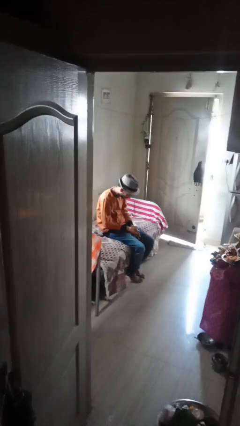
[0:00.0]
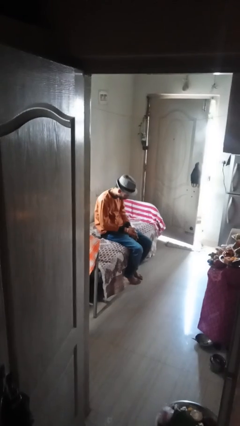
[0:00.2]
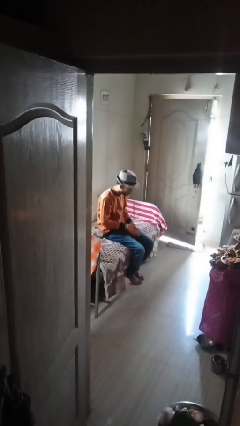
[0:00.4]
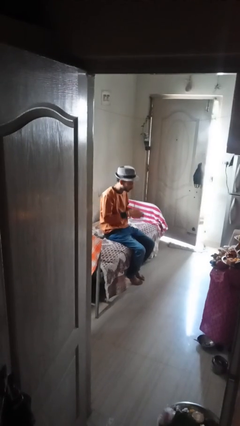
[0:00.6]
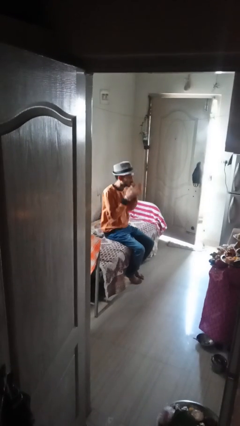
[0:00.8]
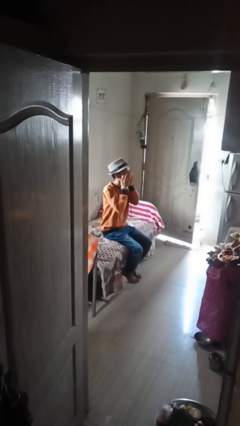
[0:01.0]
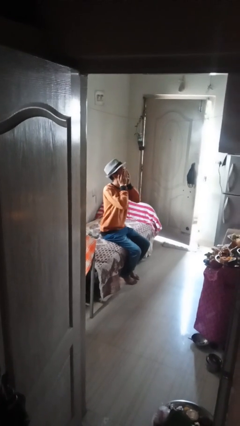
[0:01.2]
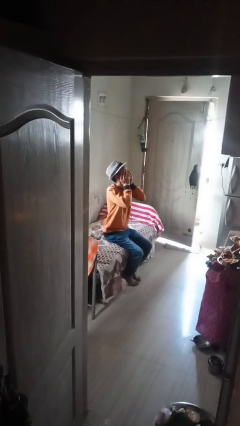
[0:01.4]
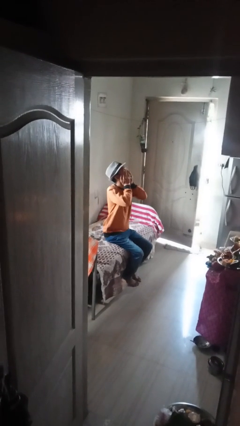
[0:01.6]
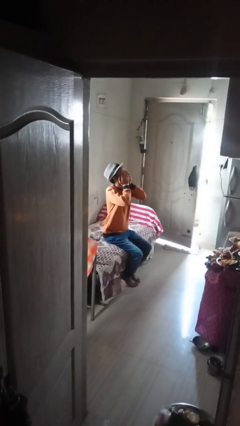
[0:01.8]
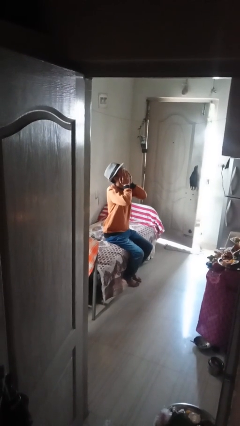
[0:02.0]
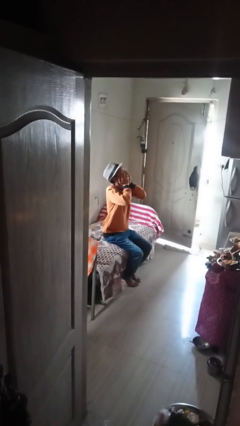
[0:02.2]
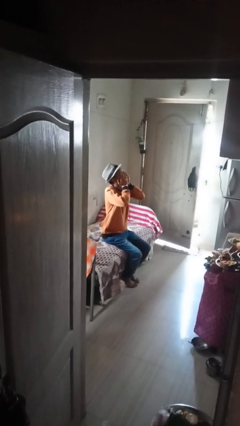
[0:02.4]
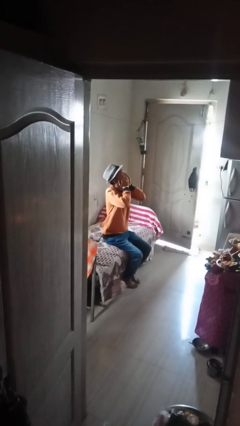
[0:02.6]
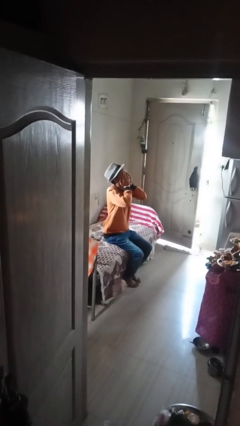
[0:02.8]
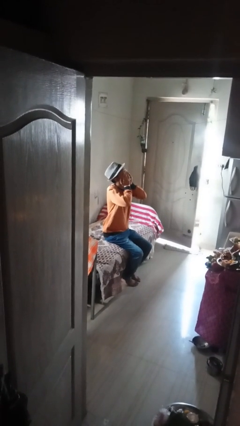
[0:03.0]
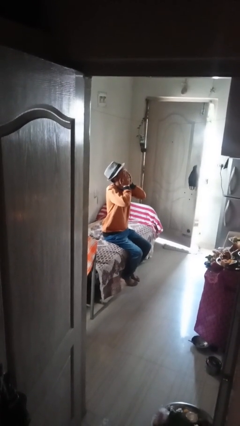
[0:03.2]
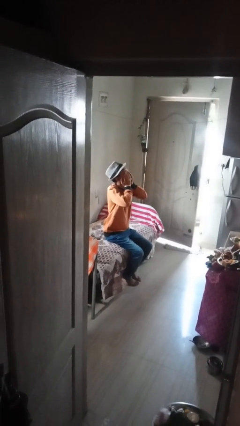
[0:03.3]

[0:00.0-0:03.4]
person covers face with hands

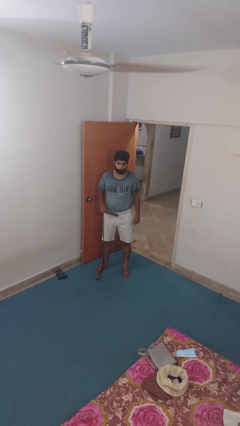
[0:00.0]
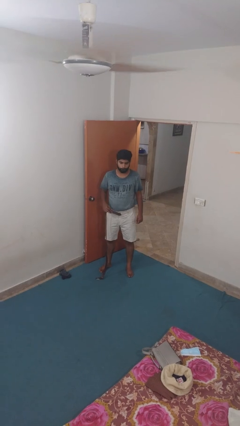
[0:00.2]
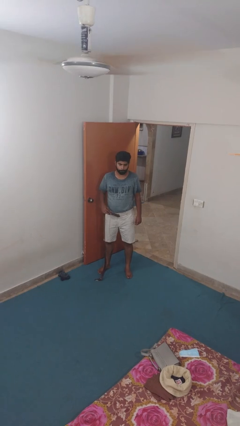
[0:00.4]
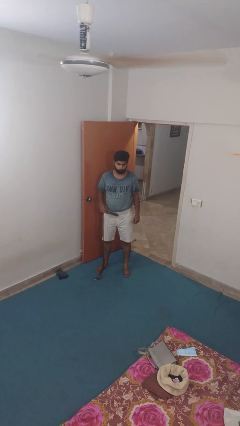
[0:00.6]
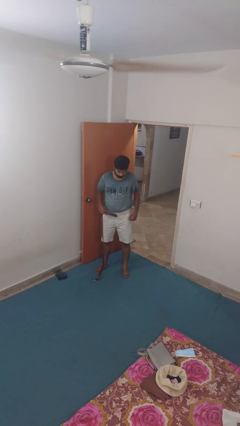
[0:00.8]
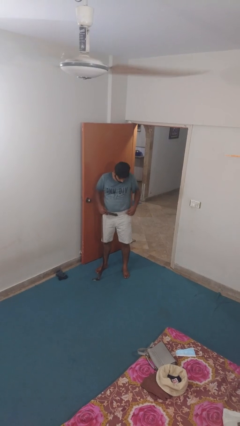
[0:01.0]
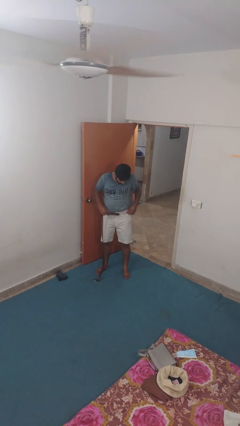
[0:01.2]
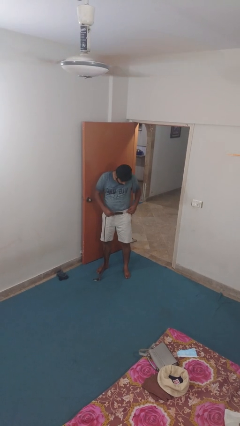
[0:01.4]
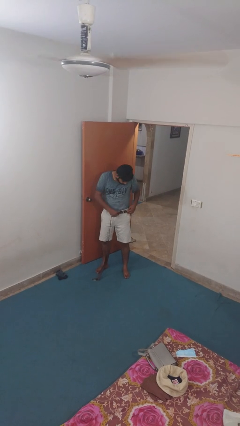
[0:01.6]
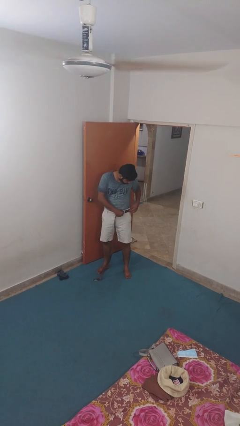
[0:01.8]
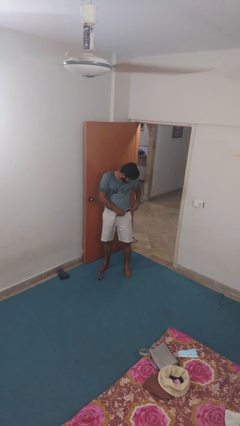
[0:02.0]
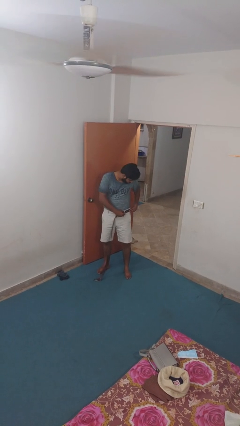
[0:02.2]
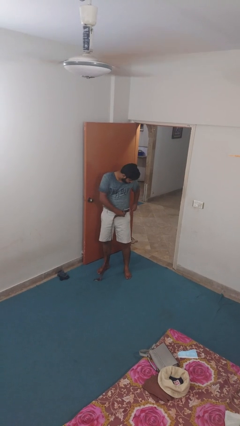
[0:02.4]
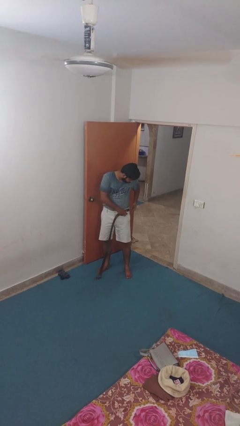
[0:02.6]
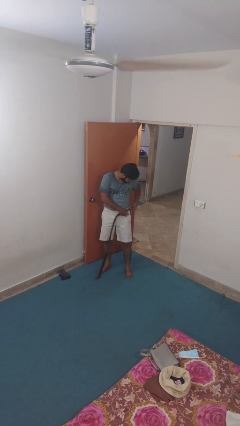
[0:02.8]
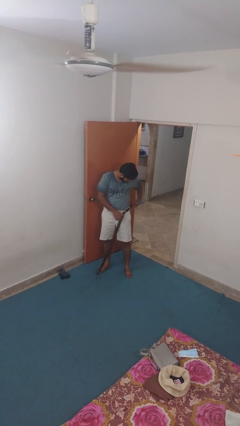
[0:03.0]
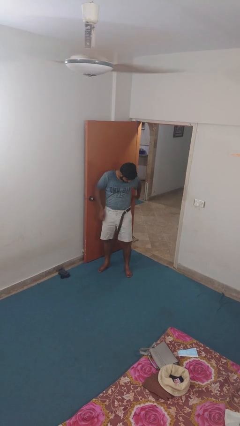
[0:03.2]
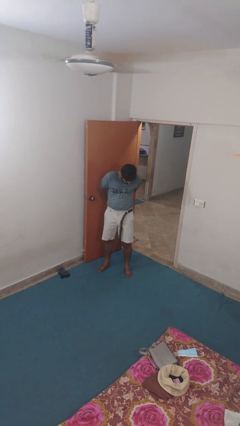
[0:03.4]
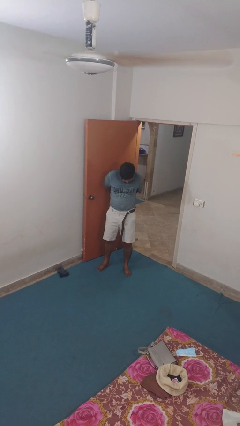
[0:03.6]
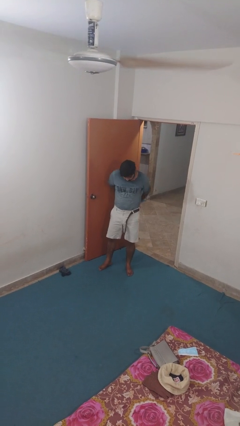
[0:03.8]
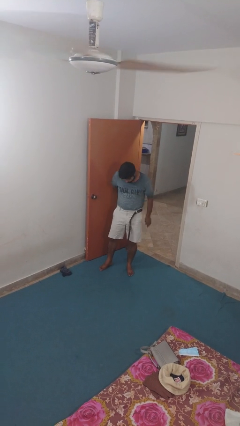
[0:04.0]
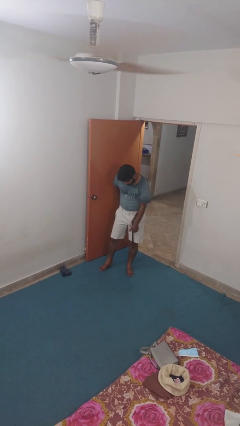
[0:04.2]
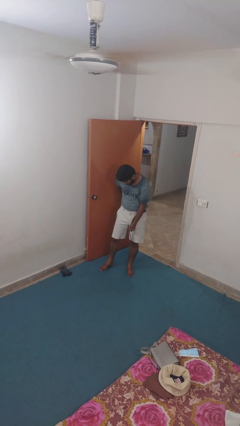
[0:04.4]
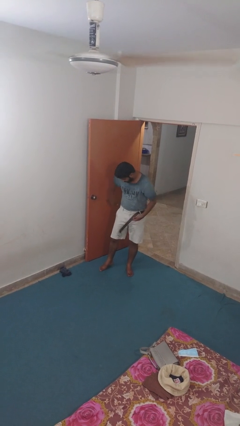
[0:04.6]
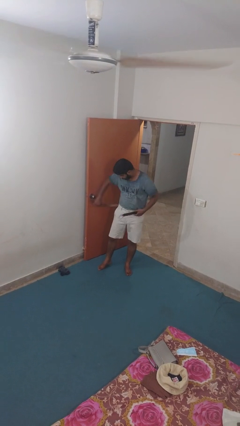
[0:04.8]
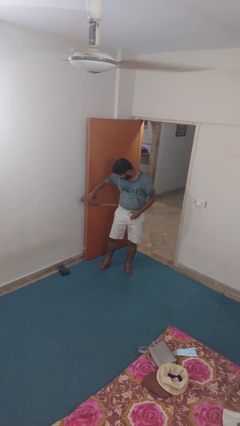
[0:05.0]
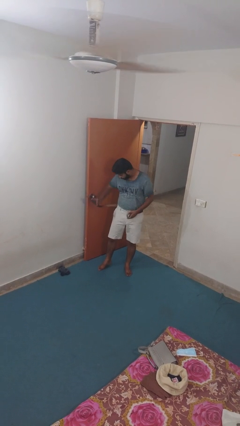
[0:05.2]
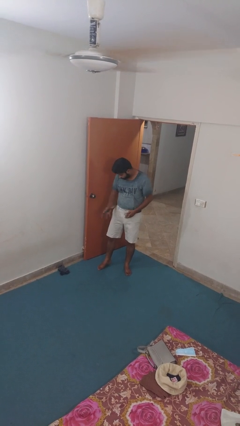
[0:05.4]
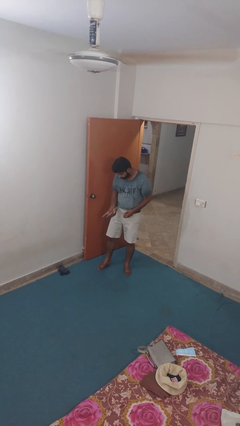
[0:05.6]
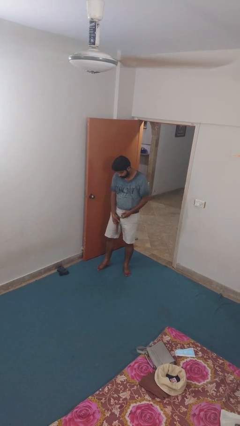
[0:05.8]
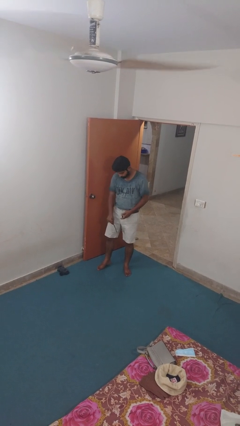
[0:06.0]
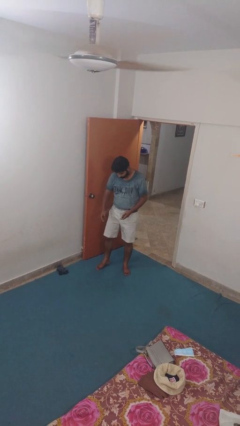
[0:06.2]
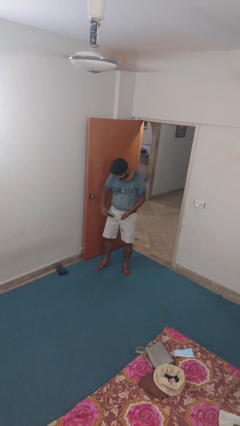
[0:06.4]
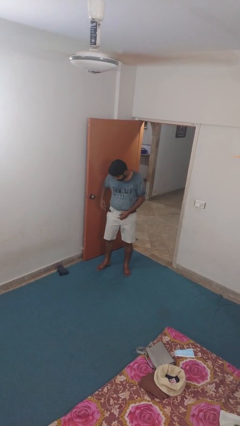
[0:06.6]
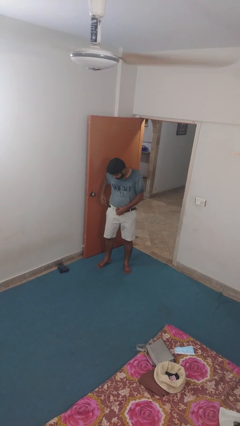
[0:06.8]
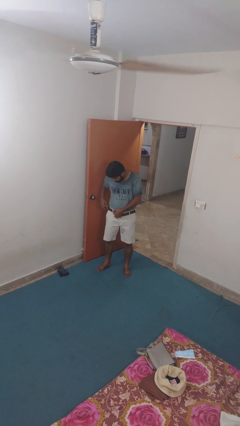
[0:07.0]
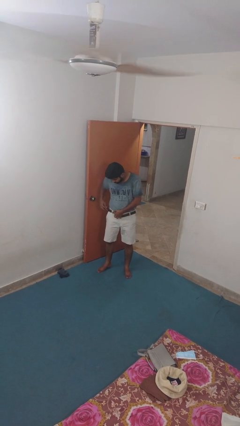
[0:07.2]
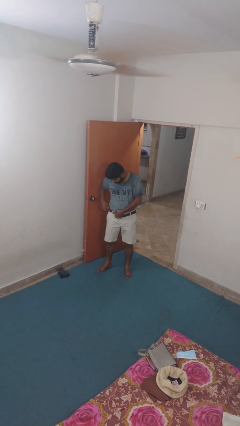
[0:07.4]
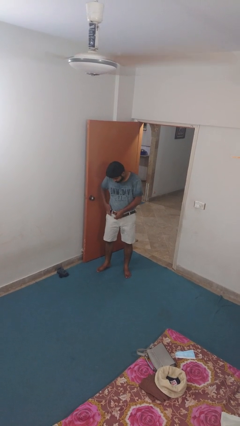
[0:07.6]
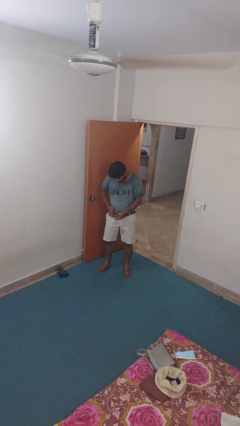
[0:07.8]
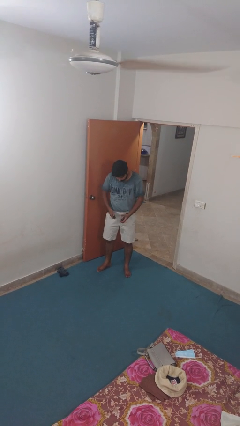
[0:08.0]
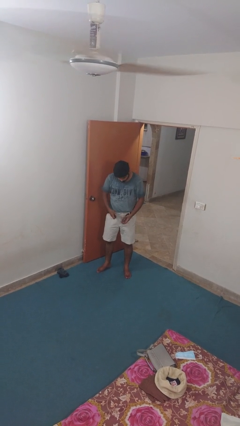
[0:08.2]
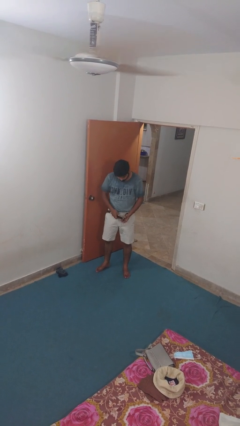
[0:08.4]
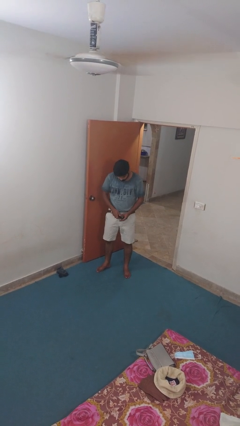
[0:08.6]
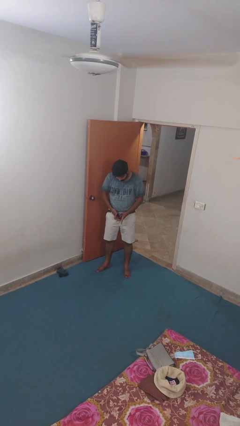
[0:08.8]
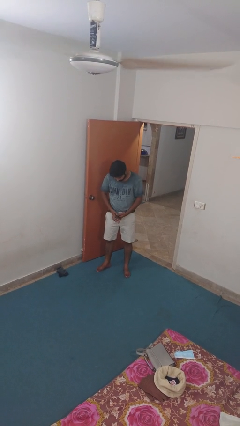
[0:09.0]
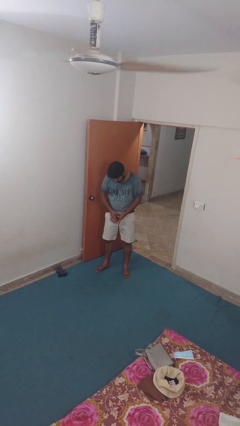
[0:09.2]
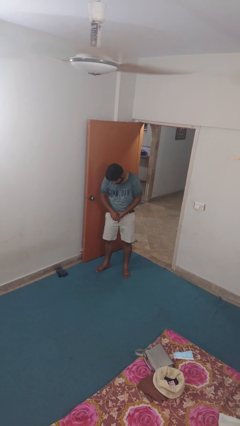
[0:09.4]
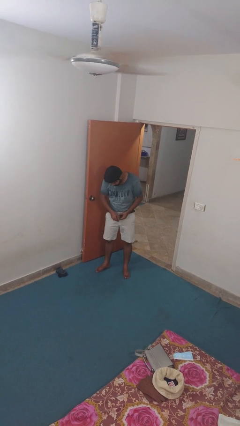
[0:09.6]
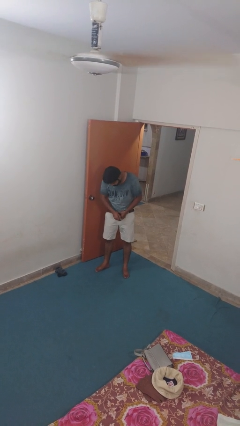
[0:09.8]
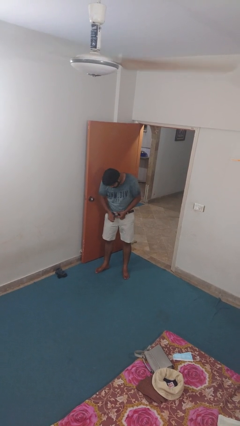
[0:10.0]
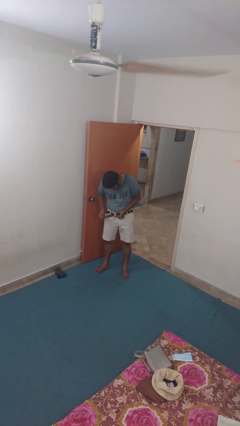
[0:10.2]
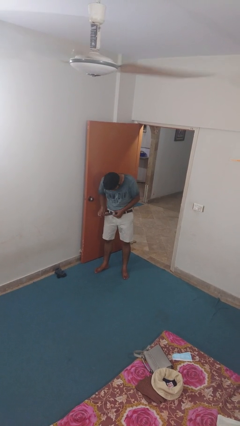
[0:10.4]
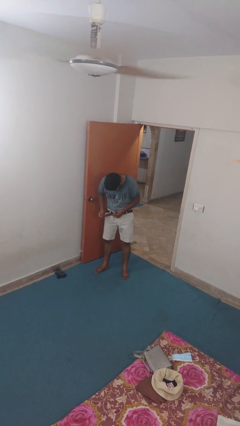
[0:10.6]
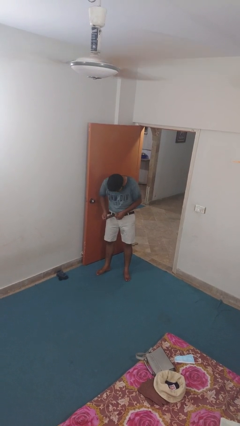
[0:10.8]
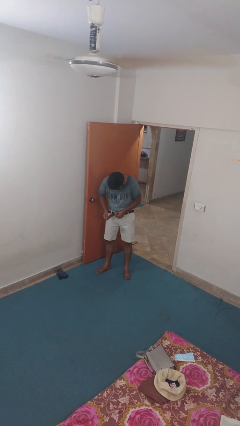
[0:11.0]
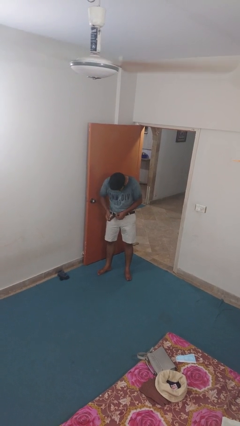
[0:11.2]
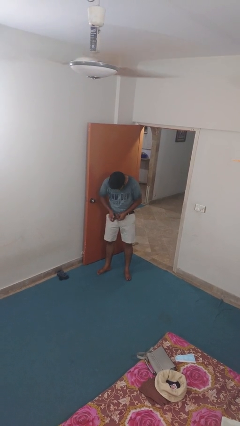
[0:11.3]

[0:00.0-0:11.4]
person puts on belt

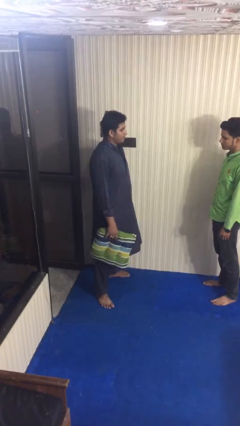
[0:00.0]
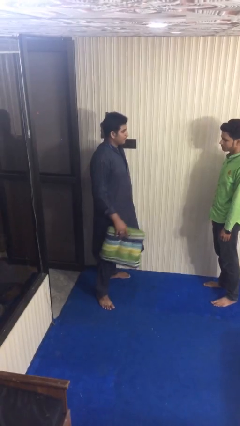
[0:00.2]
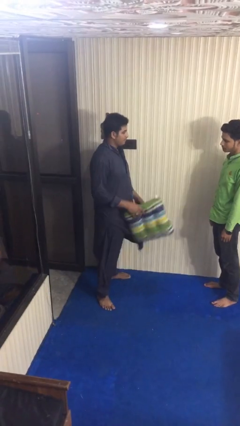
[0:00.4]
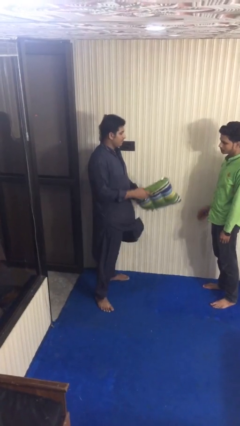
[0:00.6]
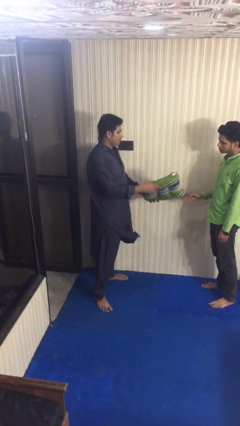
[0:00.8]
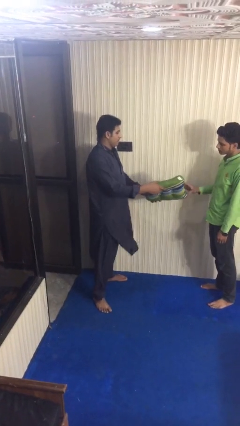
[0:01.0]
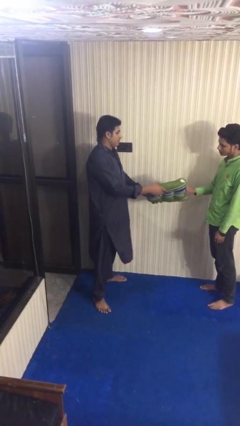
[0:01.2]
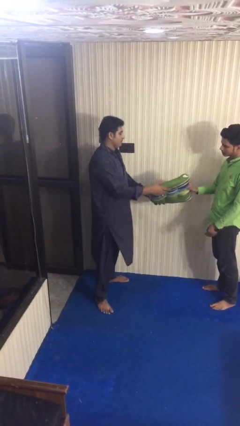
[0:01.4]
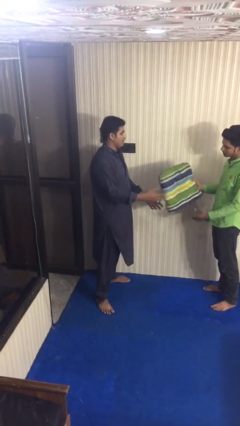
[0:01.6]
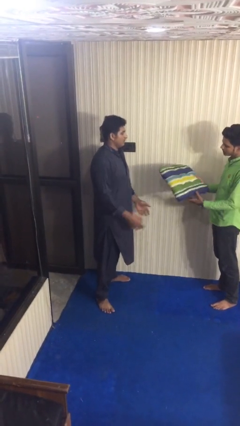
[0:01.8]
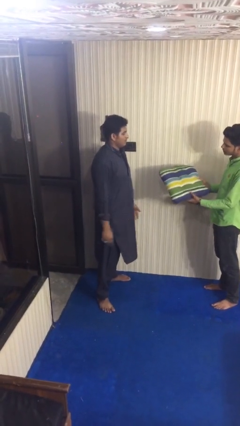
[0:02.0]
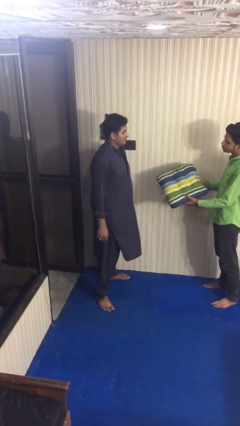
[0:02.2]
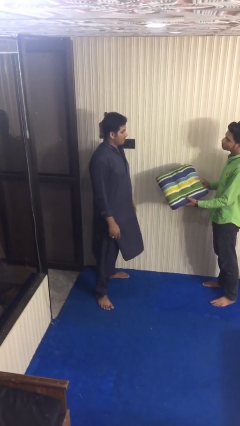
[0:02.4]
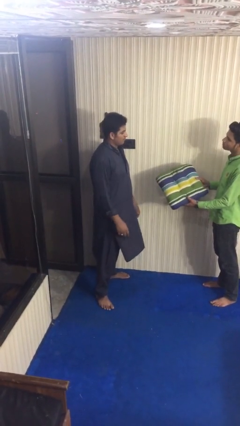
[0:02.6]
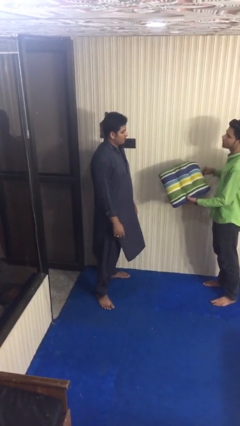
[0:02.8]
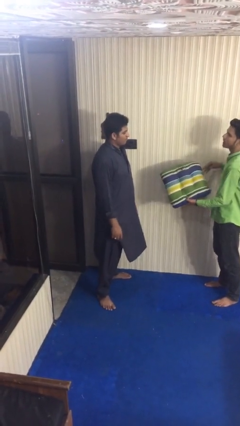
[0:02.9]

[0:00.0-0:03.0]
person transfers object to person

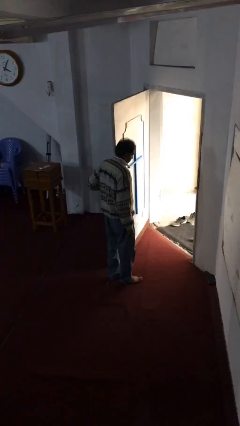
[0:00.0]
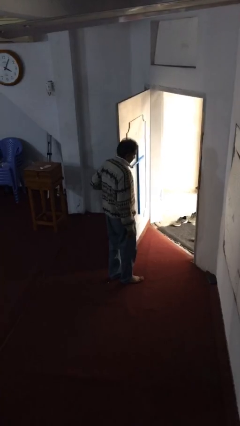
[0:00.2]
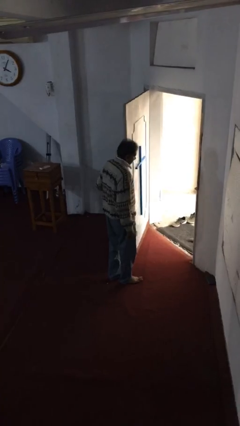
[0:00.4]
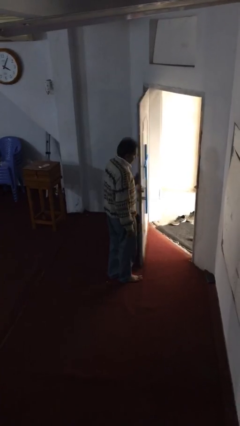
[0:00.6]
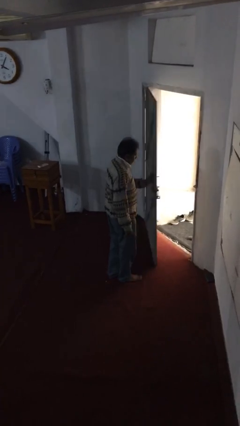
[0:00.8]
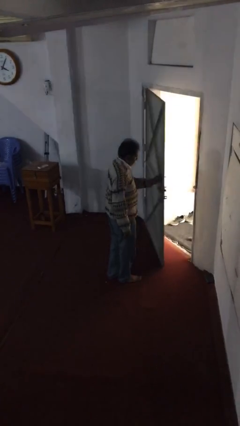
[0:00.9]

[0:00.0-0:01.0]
person closes facility door
